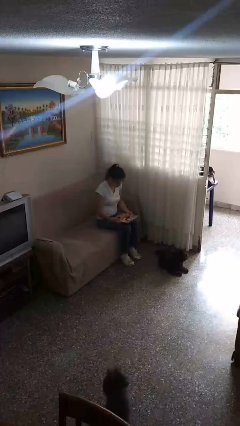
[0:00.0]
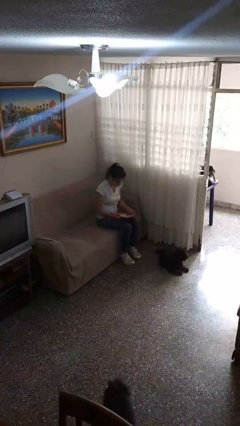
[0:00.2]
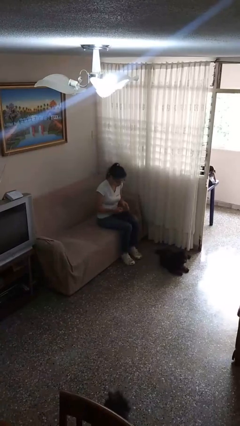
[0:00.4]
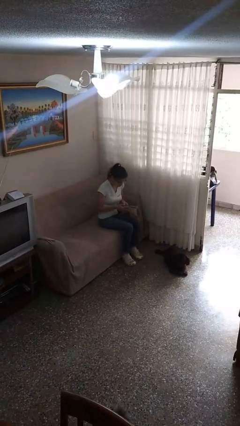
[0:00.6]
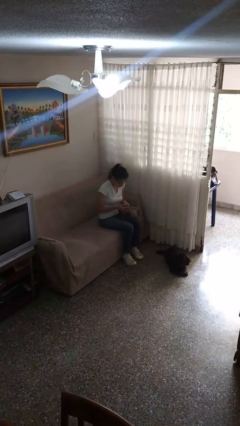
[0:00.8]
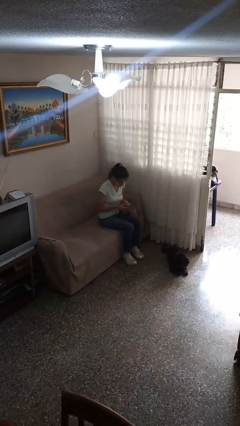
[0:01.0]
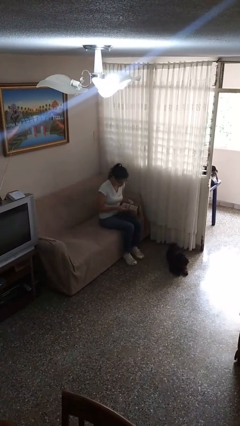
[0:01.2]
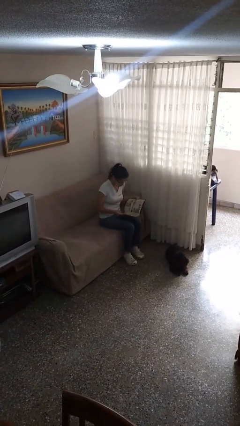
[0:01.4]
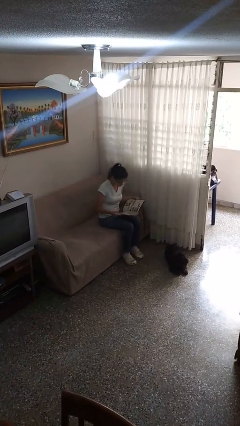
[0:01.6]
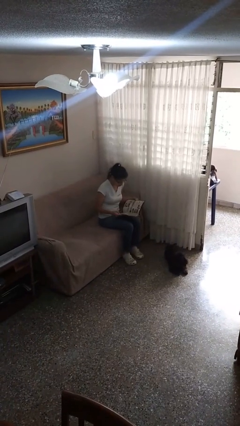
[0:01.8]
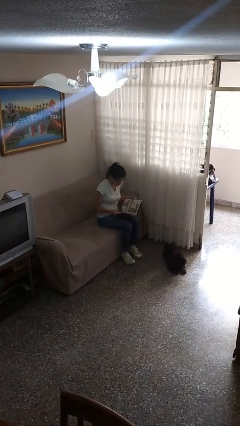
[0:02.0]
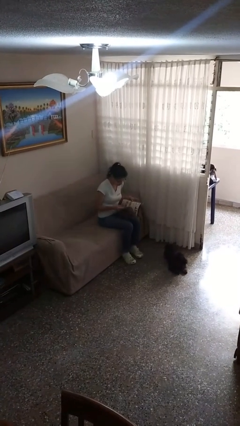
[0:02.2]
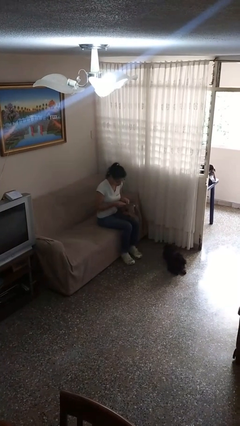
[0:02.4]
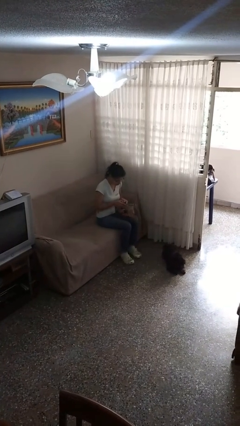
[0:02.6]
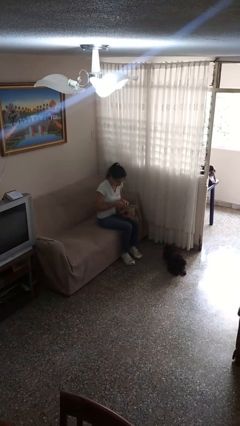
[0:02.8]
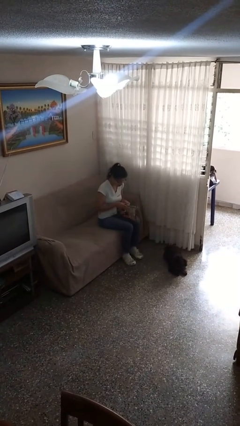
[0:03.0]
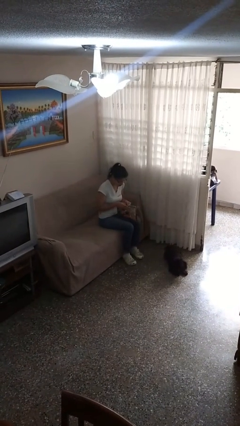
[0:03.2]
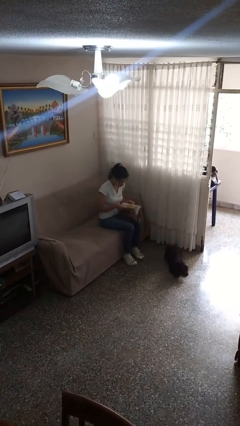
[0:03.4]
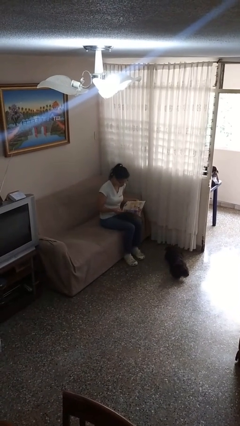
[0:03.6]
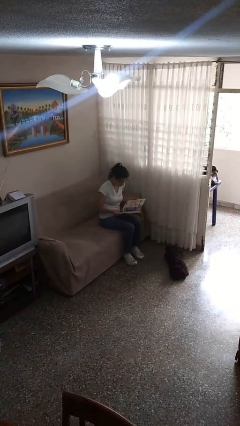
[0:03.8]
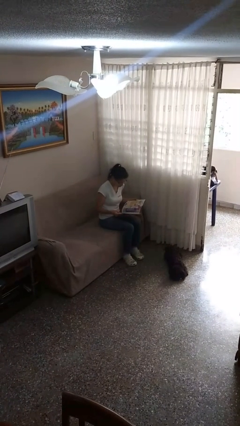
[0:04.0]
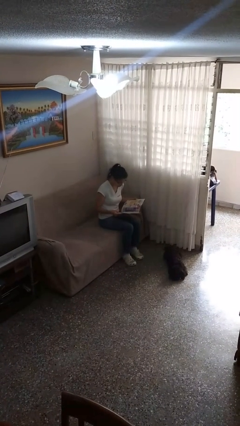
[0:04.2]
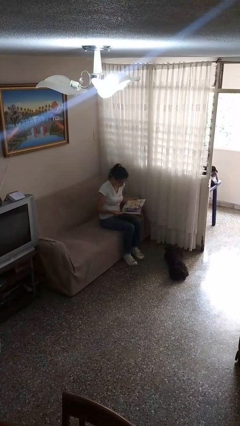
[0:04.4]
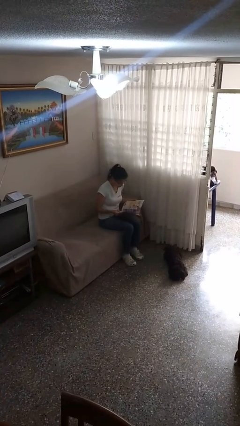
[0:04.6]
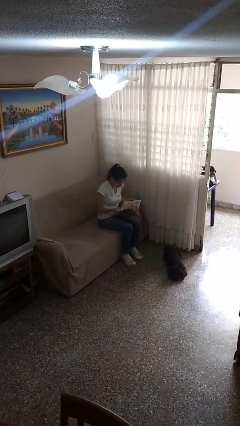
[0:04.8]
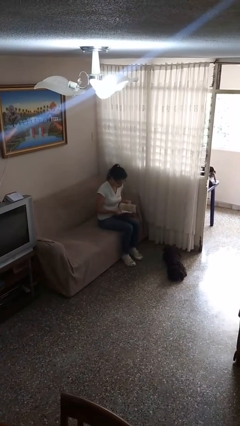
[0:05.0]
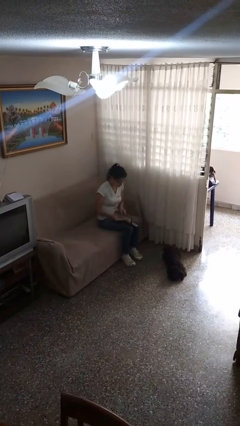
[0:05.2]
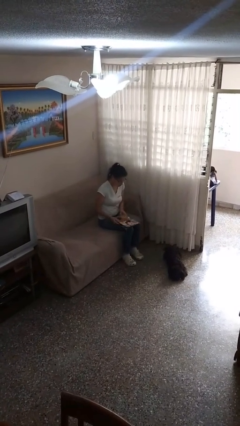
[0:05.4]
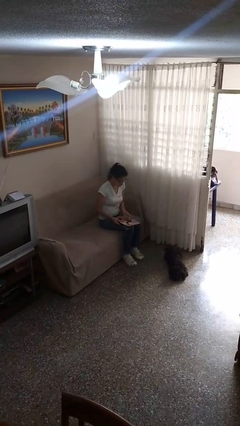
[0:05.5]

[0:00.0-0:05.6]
person reads magazine

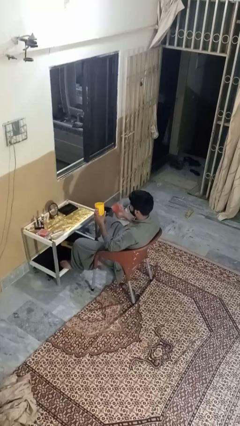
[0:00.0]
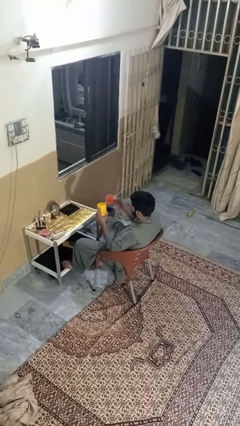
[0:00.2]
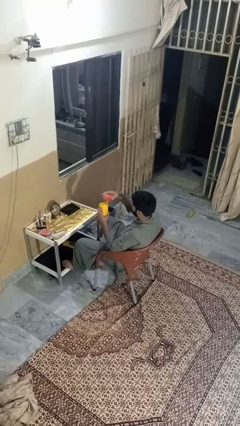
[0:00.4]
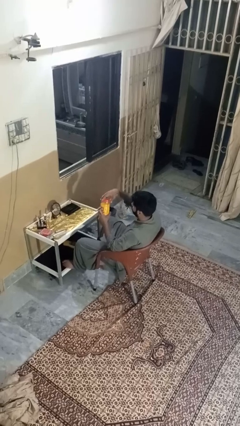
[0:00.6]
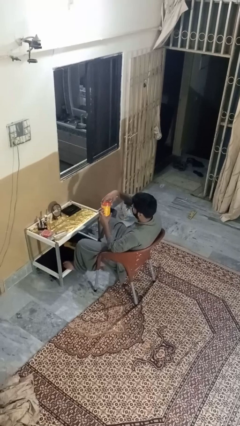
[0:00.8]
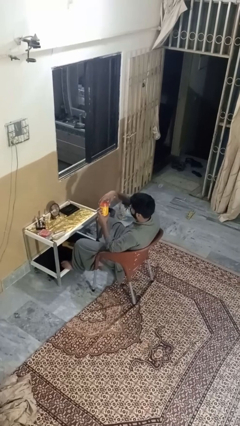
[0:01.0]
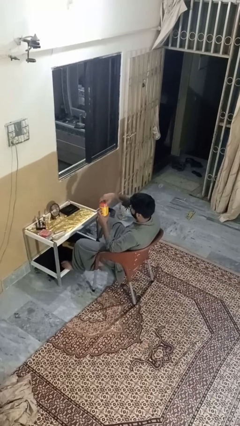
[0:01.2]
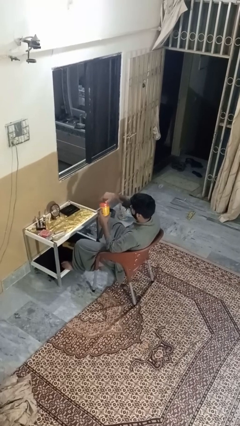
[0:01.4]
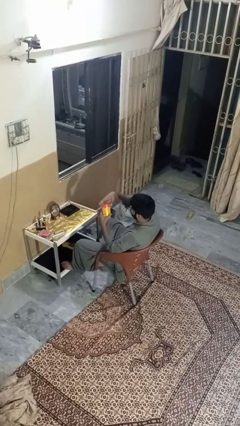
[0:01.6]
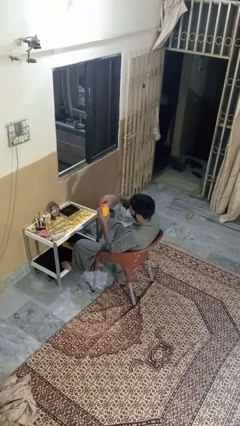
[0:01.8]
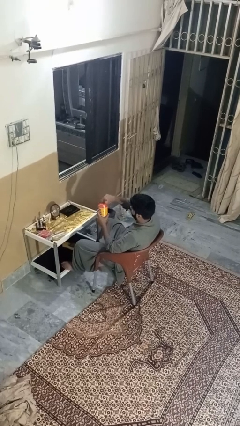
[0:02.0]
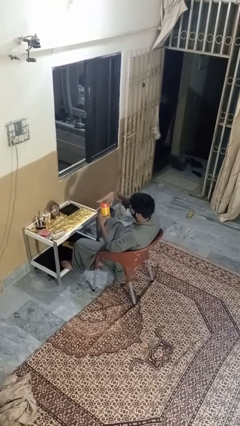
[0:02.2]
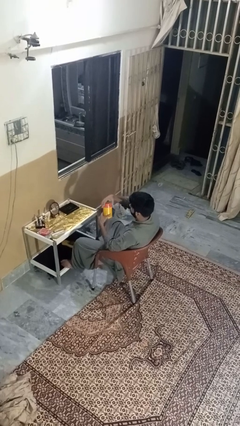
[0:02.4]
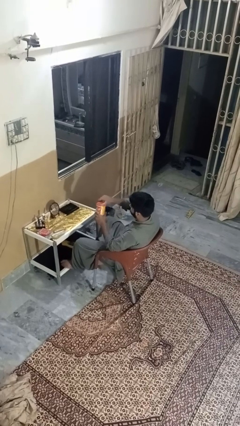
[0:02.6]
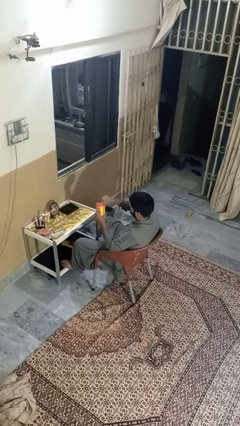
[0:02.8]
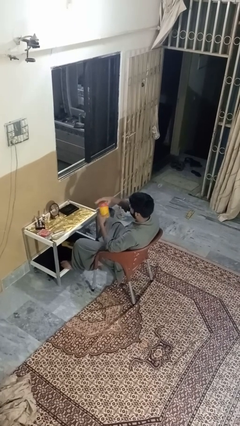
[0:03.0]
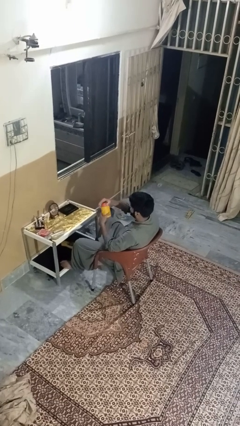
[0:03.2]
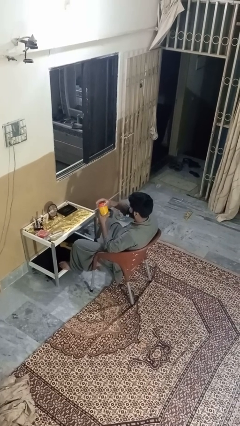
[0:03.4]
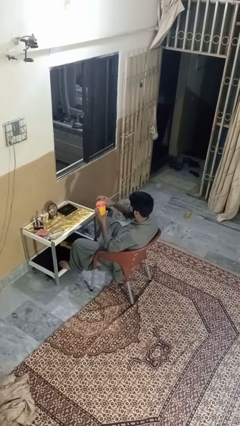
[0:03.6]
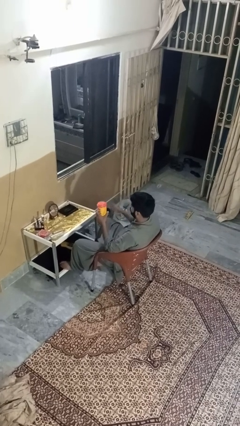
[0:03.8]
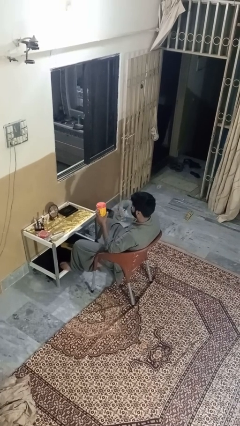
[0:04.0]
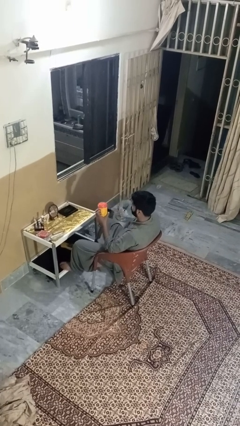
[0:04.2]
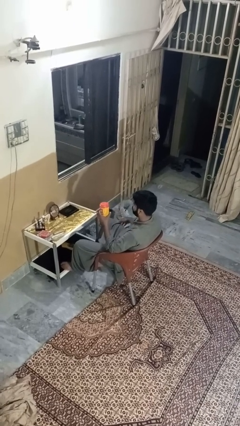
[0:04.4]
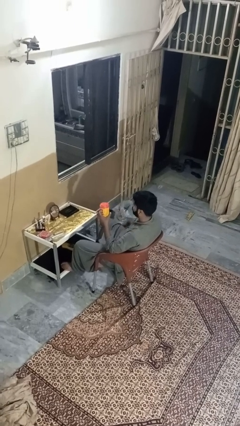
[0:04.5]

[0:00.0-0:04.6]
person closes jar

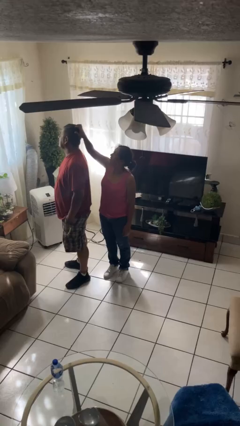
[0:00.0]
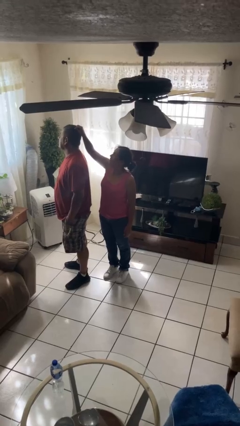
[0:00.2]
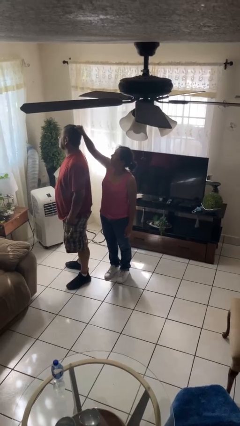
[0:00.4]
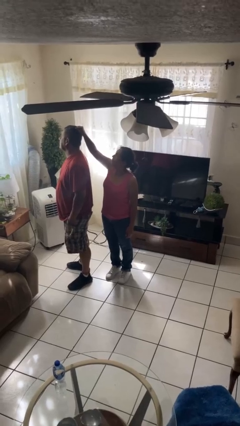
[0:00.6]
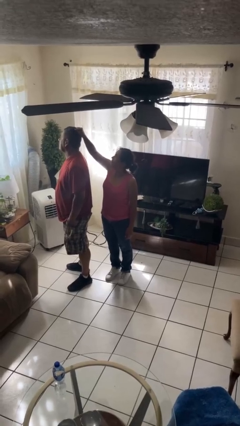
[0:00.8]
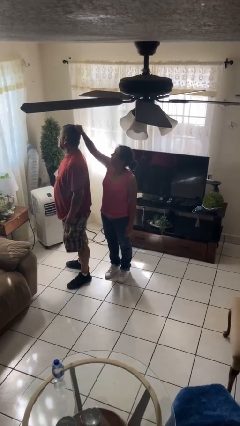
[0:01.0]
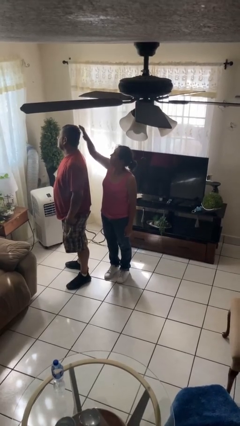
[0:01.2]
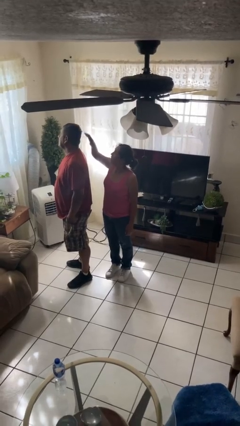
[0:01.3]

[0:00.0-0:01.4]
person grabs person by hair

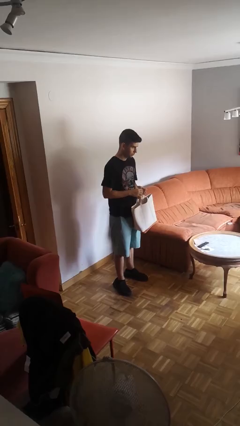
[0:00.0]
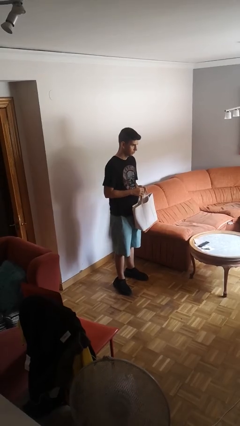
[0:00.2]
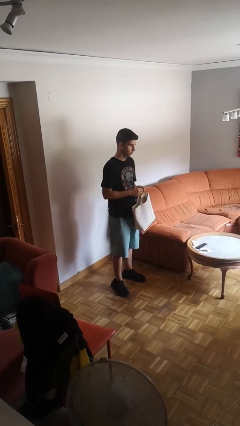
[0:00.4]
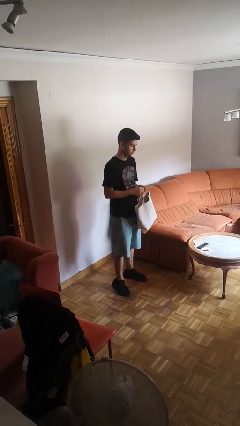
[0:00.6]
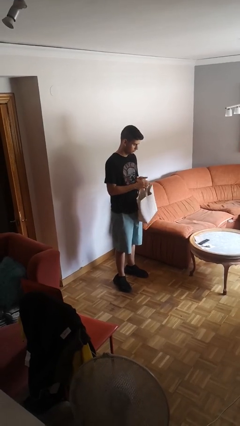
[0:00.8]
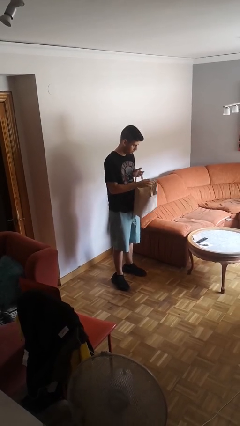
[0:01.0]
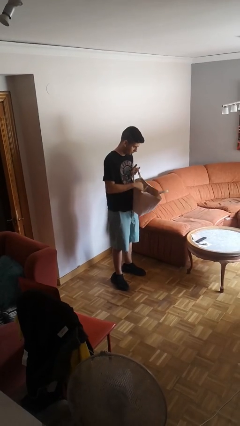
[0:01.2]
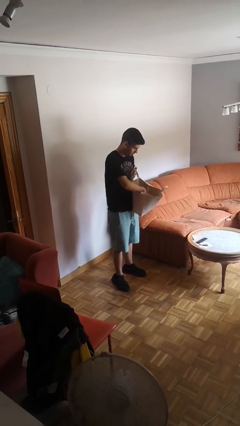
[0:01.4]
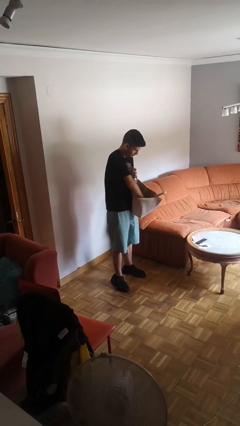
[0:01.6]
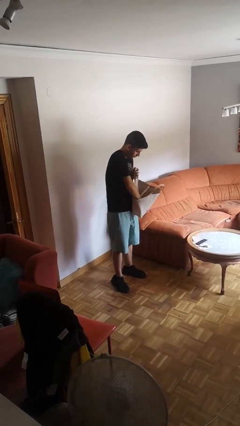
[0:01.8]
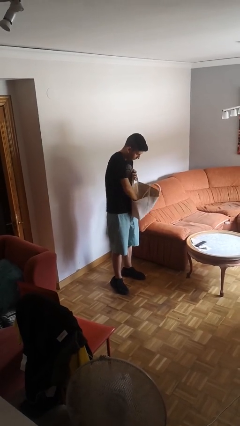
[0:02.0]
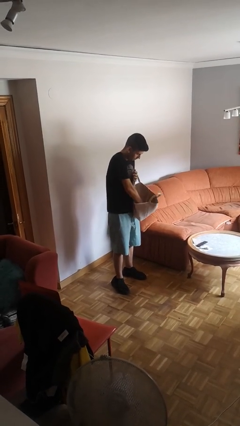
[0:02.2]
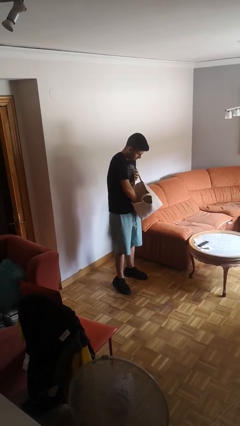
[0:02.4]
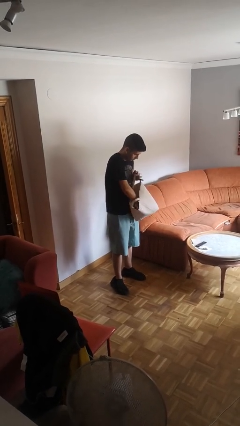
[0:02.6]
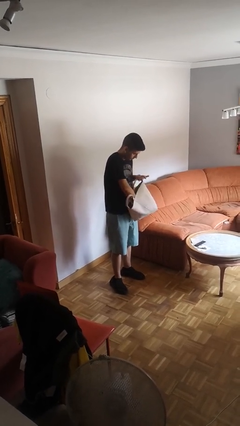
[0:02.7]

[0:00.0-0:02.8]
person searches in purse

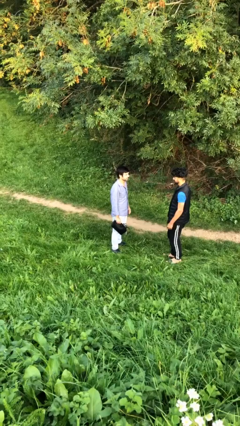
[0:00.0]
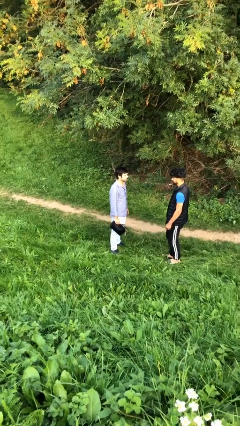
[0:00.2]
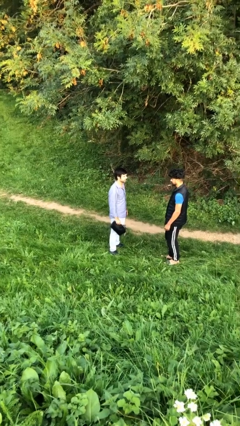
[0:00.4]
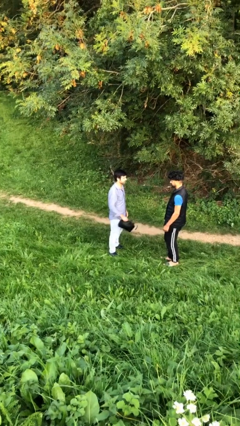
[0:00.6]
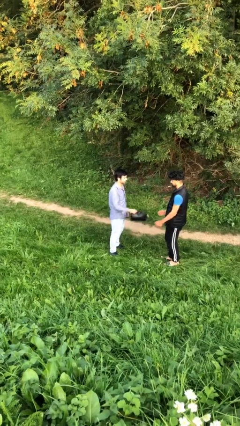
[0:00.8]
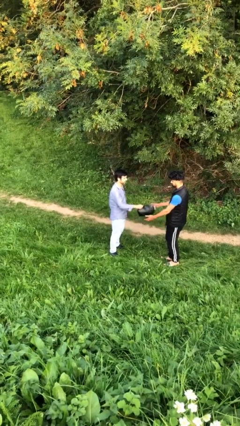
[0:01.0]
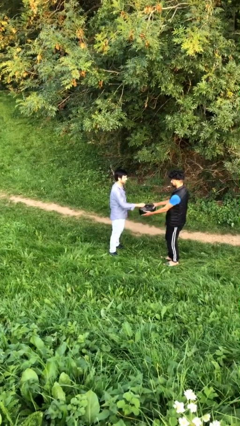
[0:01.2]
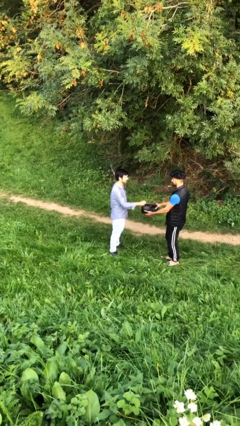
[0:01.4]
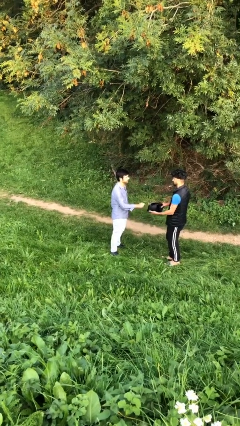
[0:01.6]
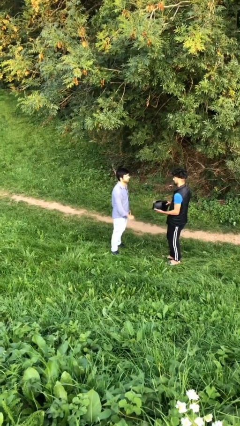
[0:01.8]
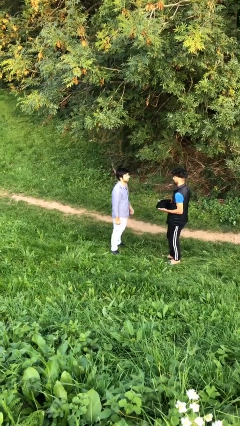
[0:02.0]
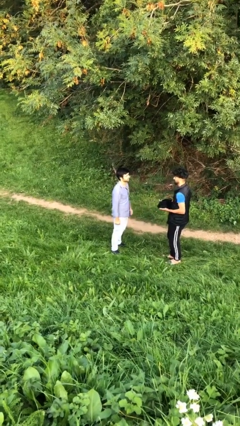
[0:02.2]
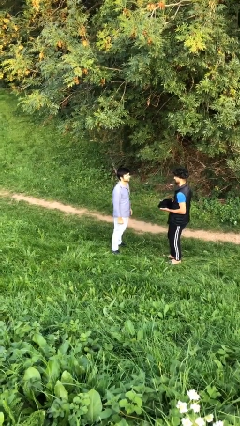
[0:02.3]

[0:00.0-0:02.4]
person transfers object to person

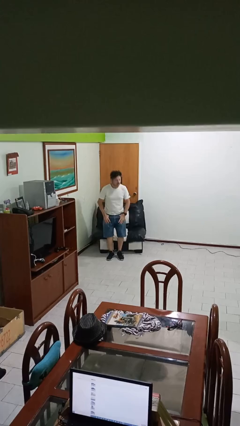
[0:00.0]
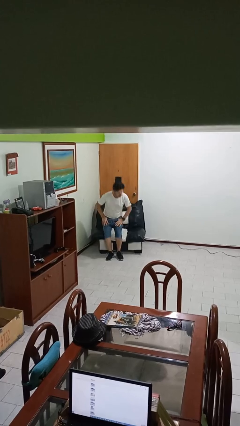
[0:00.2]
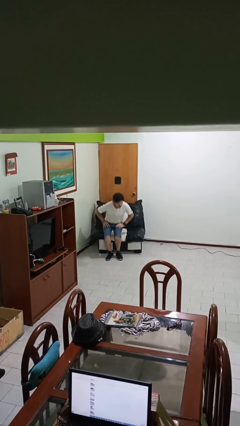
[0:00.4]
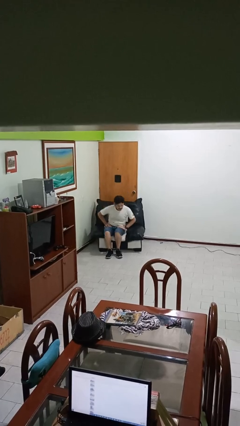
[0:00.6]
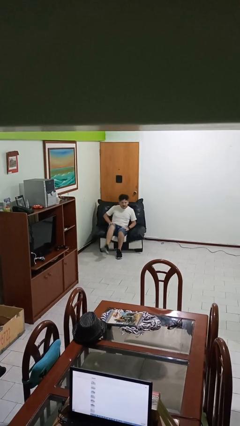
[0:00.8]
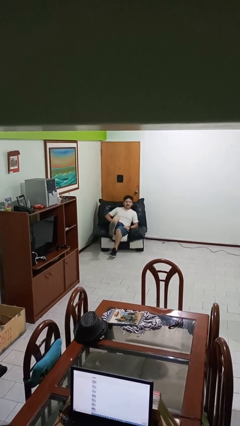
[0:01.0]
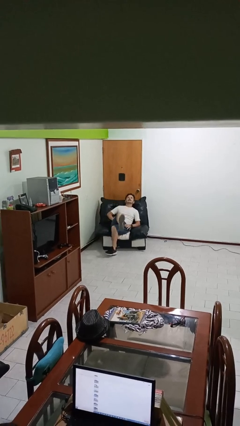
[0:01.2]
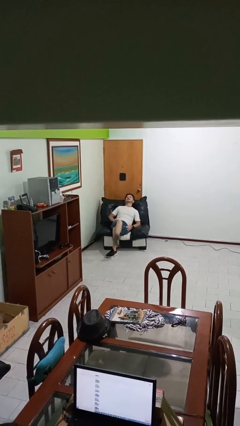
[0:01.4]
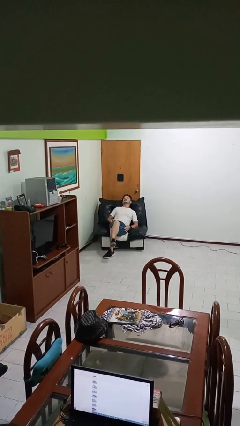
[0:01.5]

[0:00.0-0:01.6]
person lies down on couch
